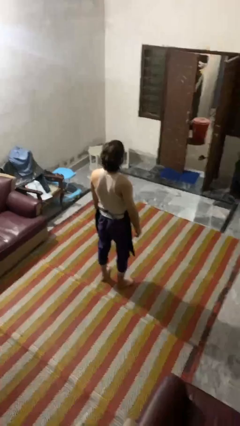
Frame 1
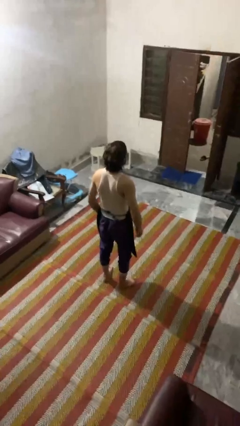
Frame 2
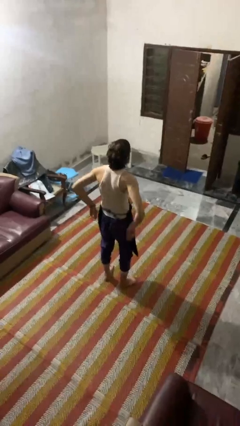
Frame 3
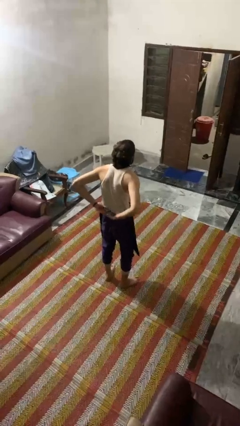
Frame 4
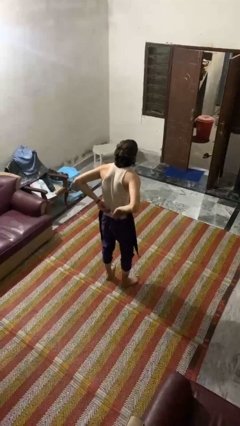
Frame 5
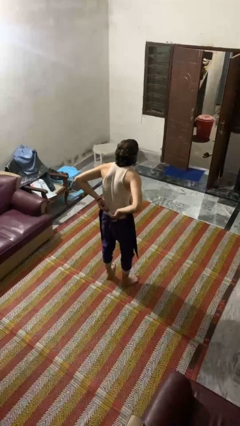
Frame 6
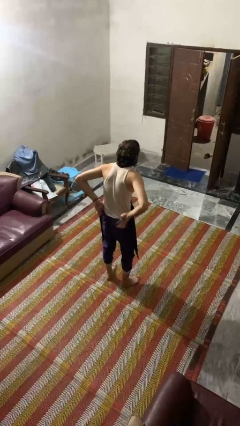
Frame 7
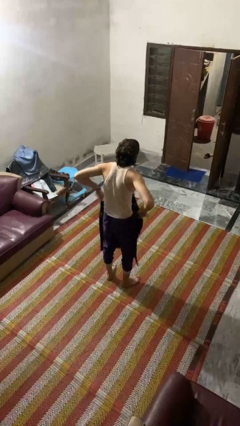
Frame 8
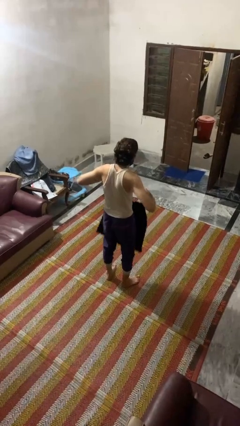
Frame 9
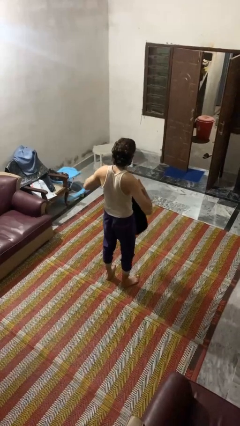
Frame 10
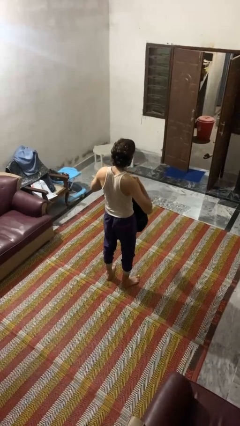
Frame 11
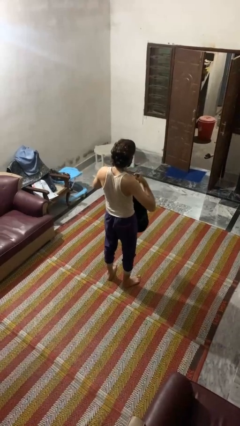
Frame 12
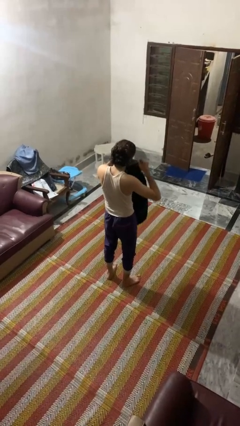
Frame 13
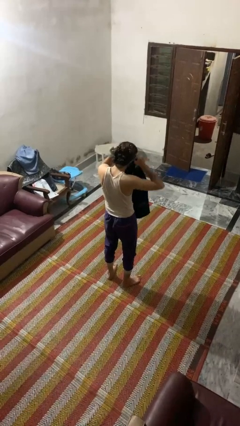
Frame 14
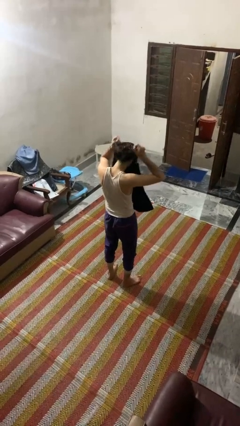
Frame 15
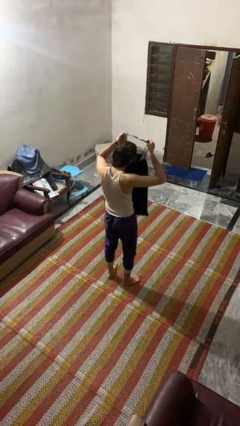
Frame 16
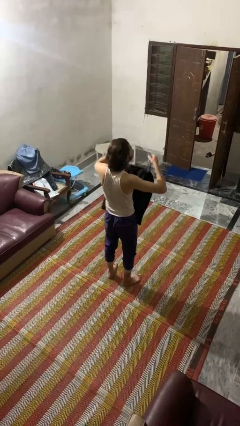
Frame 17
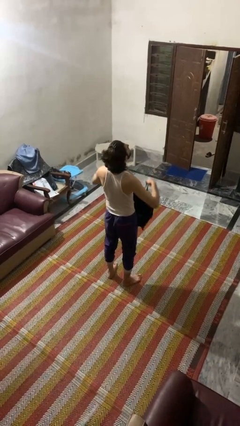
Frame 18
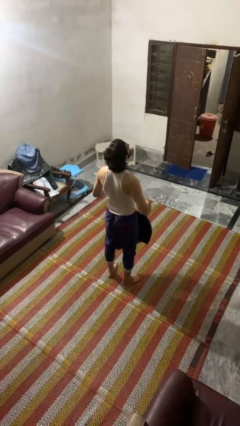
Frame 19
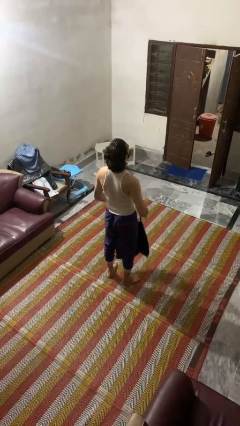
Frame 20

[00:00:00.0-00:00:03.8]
person takes off apron

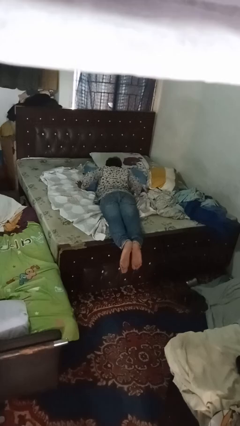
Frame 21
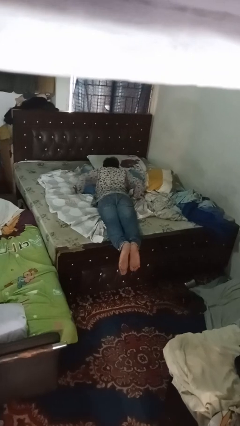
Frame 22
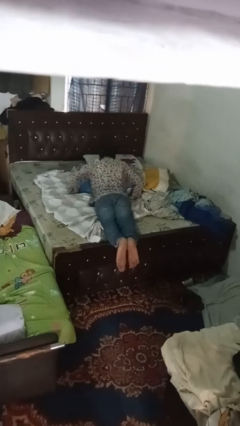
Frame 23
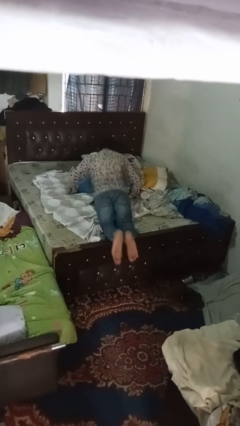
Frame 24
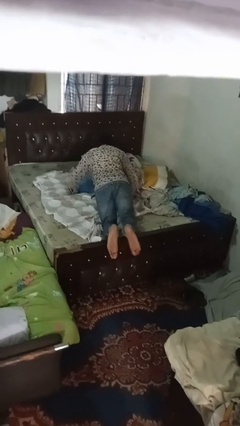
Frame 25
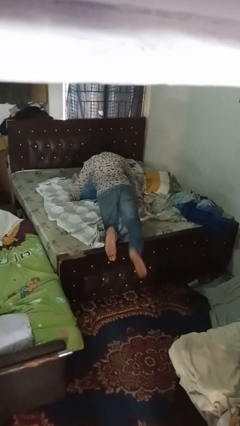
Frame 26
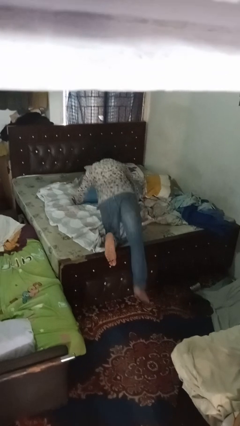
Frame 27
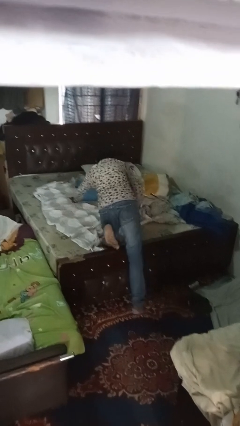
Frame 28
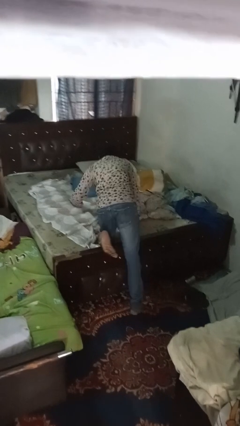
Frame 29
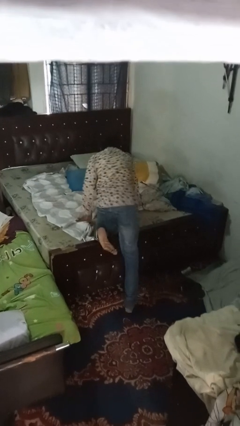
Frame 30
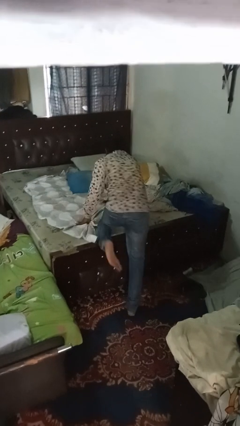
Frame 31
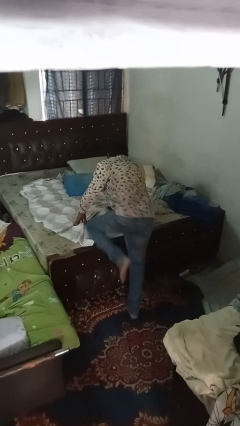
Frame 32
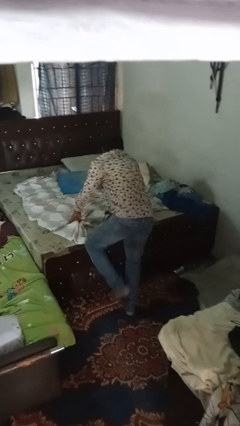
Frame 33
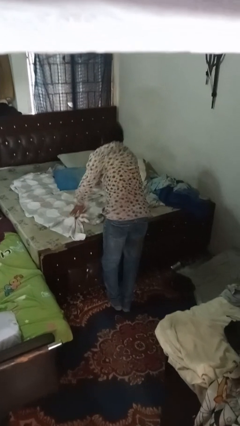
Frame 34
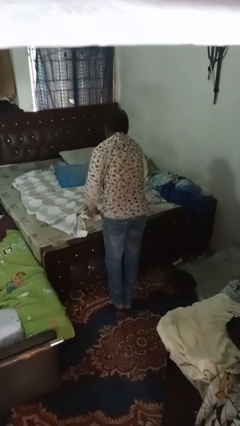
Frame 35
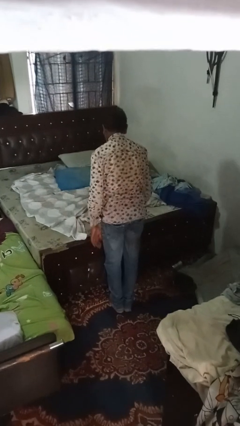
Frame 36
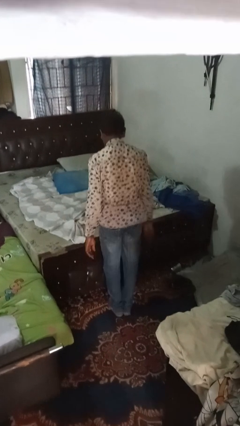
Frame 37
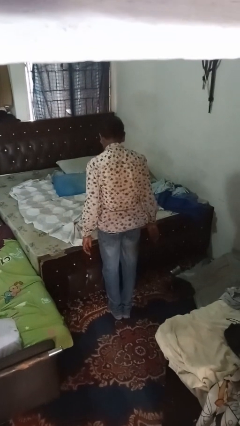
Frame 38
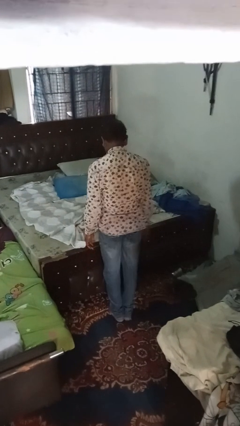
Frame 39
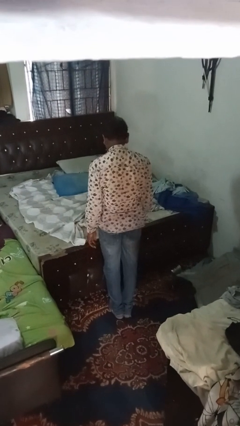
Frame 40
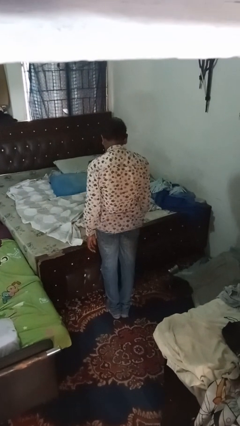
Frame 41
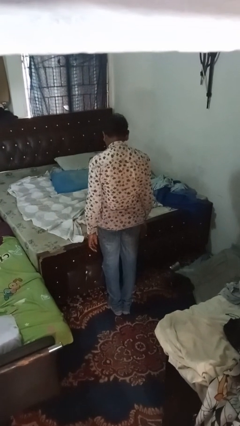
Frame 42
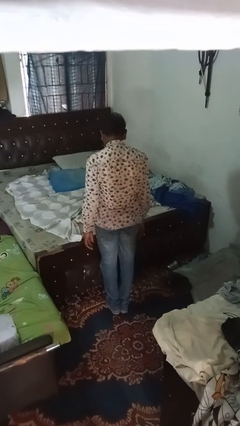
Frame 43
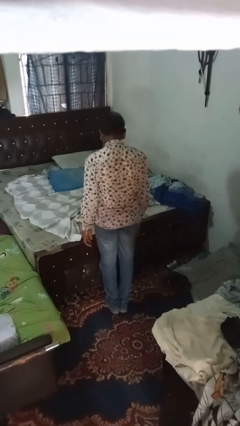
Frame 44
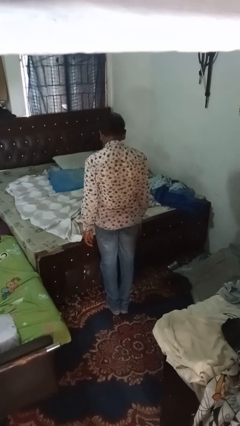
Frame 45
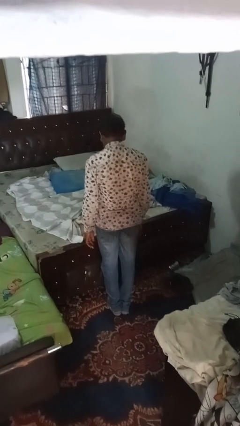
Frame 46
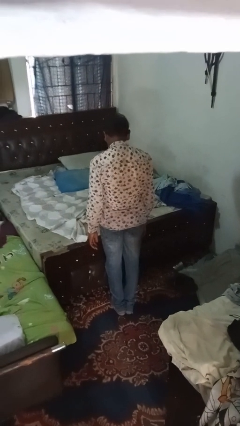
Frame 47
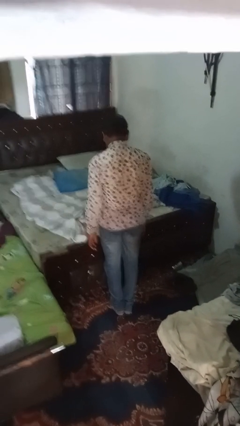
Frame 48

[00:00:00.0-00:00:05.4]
person stands up

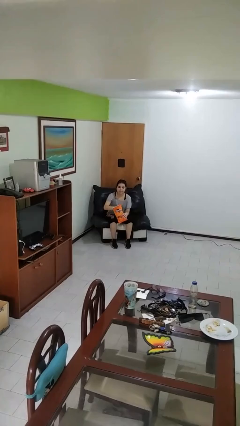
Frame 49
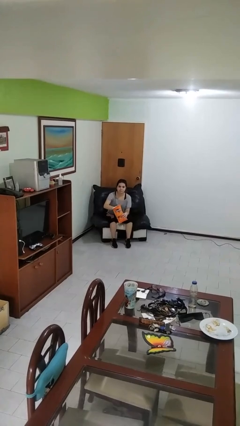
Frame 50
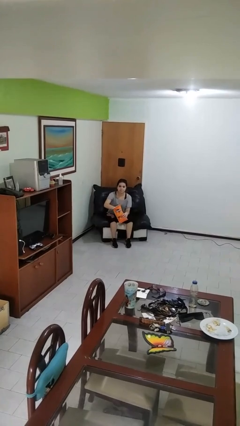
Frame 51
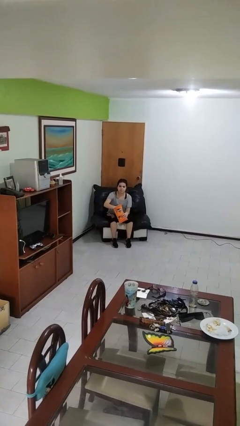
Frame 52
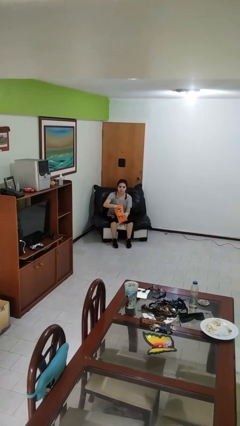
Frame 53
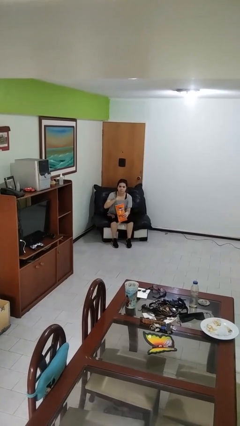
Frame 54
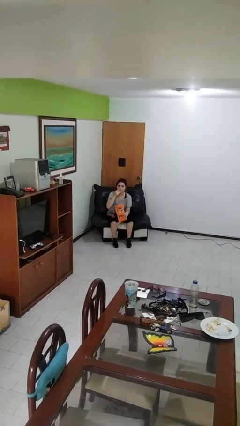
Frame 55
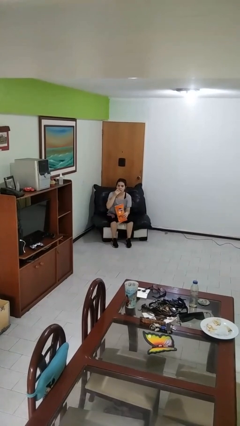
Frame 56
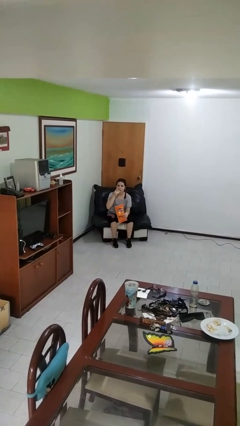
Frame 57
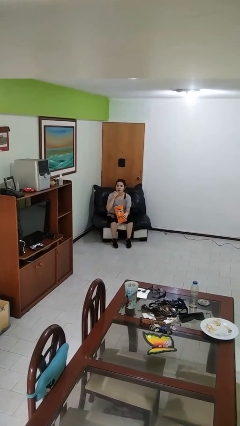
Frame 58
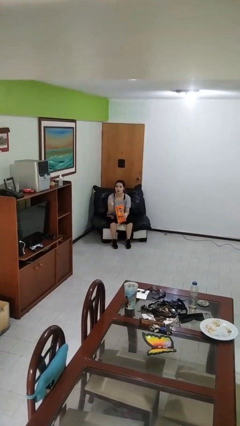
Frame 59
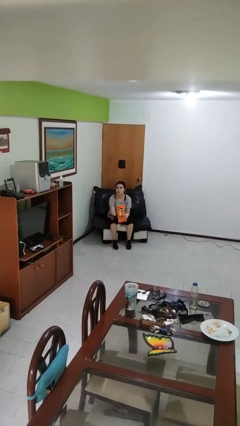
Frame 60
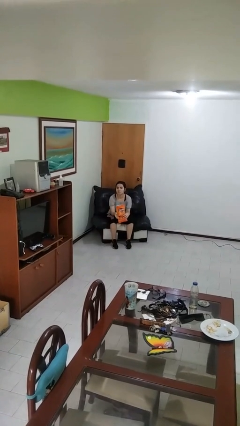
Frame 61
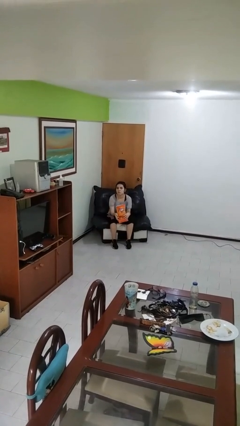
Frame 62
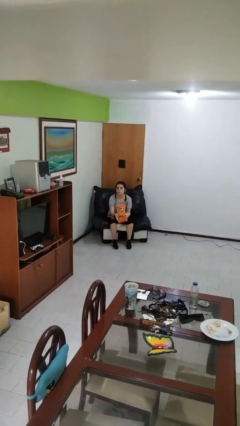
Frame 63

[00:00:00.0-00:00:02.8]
person eats snack from bag

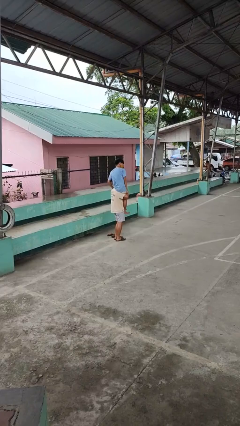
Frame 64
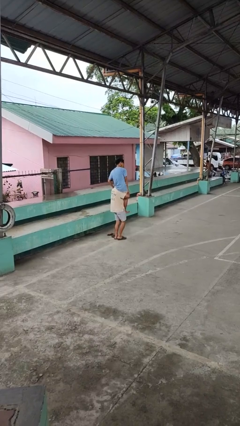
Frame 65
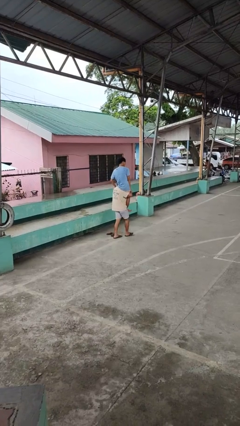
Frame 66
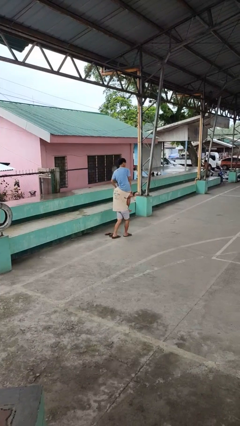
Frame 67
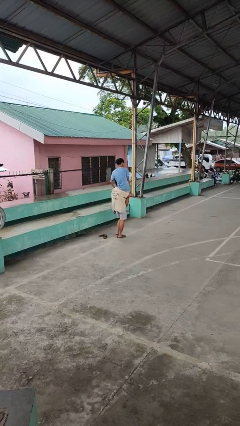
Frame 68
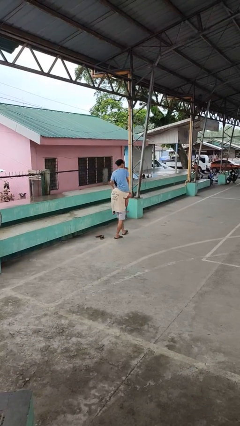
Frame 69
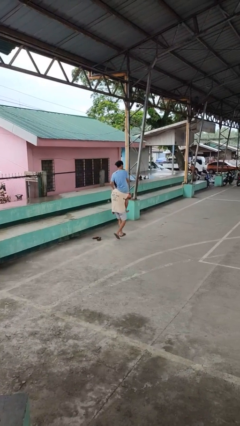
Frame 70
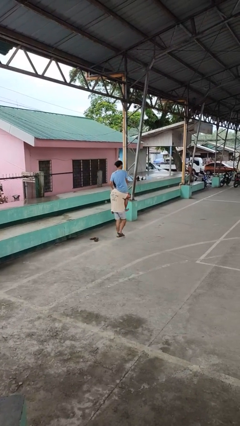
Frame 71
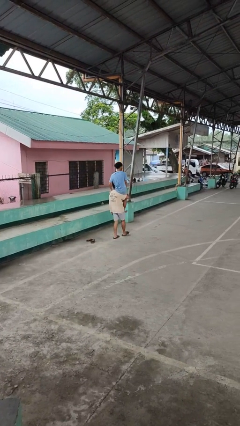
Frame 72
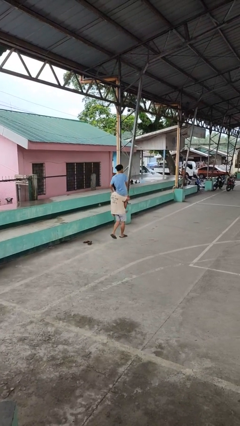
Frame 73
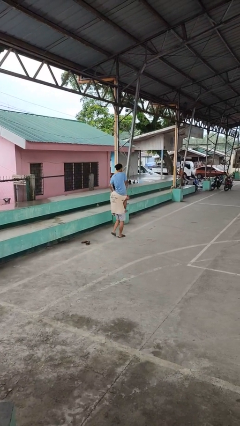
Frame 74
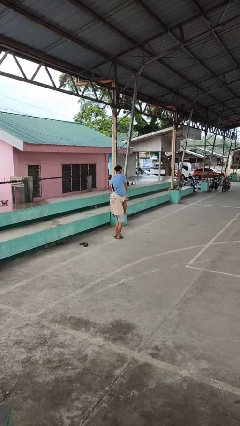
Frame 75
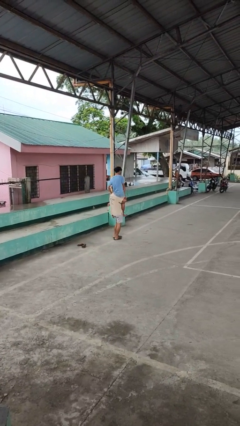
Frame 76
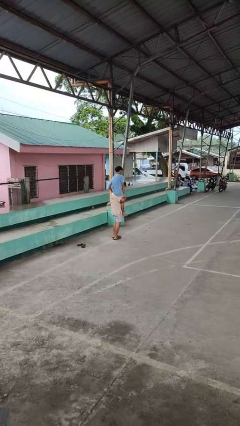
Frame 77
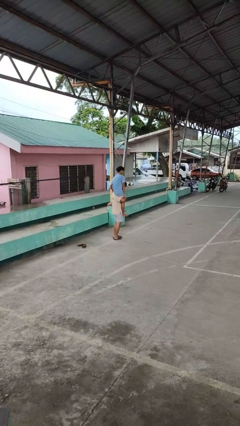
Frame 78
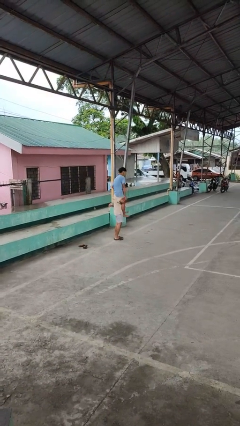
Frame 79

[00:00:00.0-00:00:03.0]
person carries person on shoulders

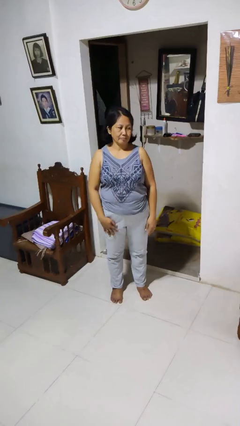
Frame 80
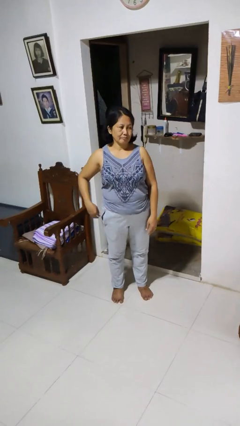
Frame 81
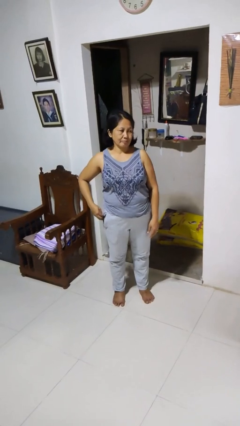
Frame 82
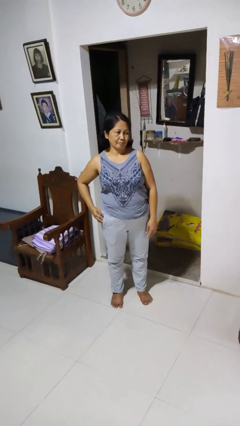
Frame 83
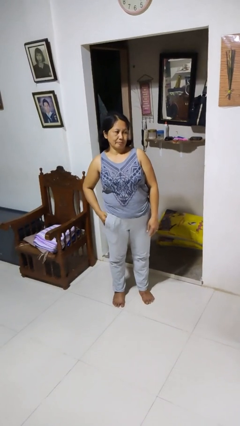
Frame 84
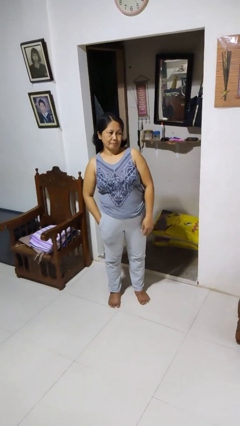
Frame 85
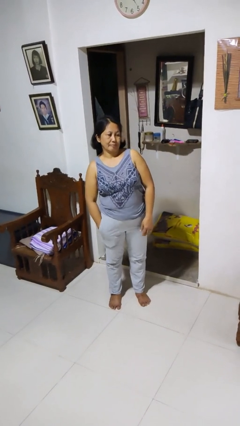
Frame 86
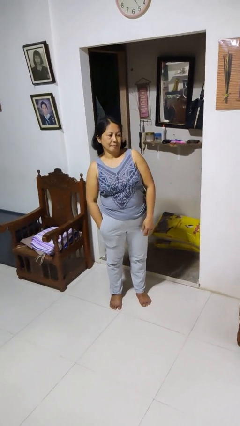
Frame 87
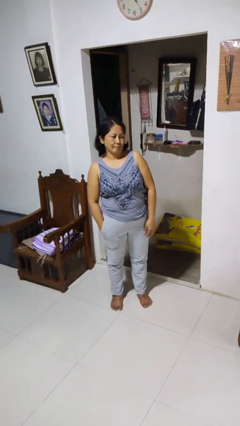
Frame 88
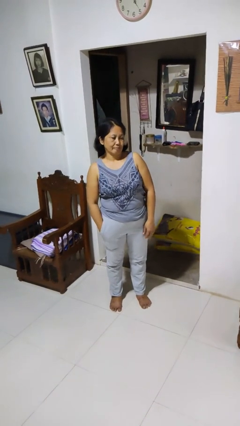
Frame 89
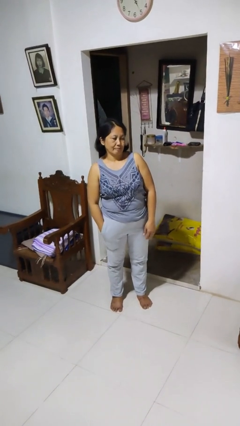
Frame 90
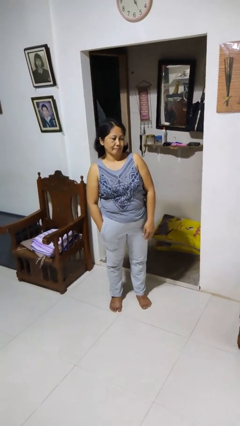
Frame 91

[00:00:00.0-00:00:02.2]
person puts hands in back pockets
